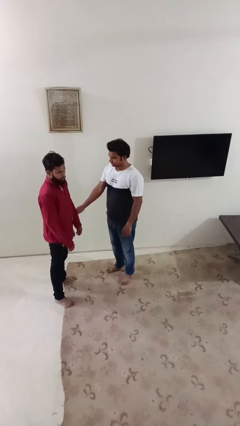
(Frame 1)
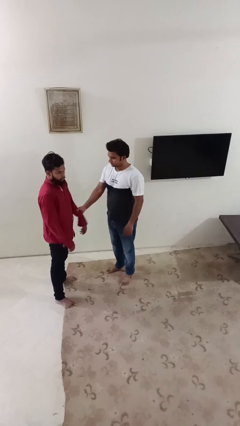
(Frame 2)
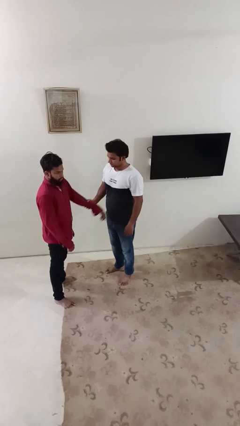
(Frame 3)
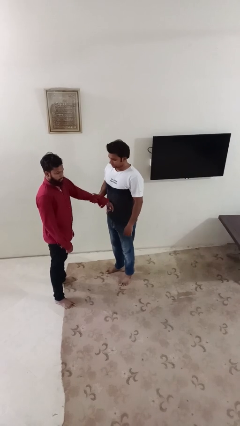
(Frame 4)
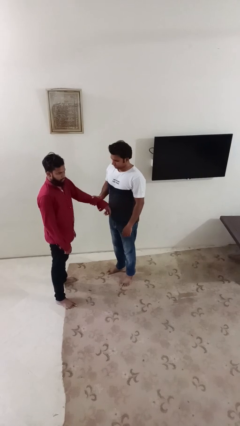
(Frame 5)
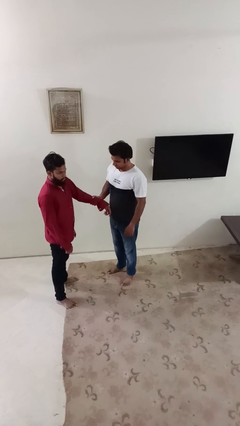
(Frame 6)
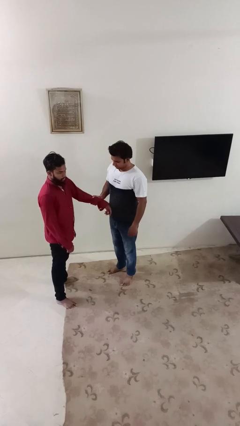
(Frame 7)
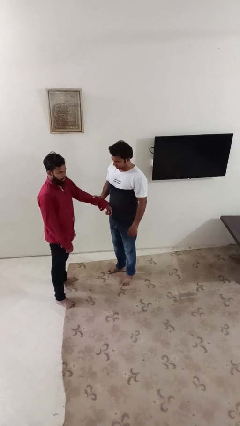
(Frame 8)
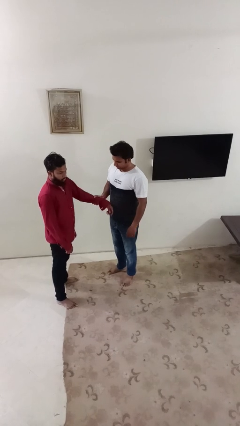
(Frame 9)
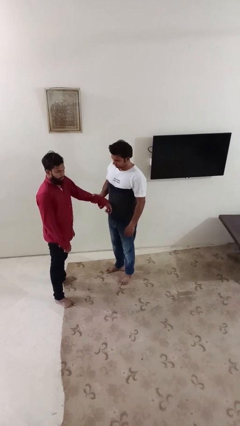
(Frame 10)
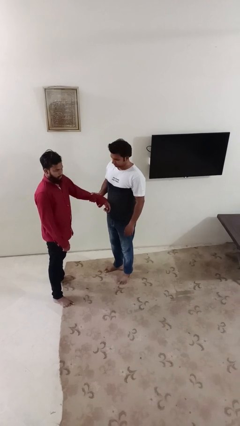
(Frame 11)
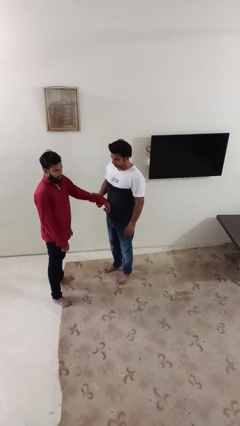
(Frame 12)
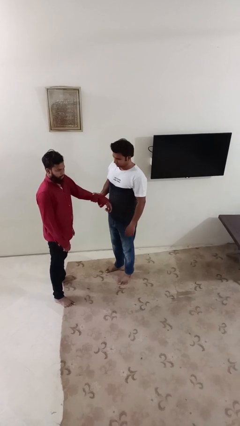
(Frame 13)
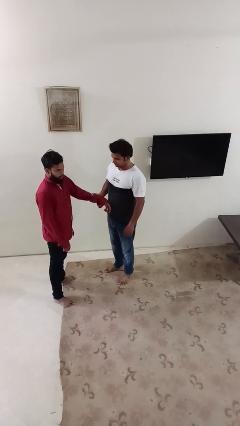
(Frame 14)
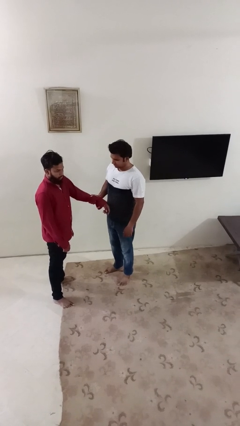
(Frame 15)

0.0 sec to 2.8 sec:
person grabs person by forearm

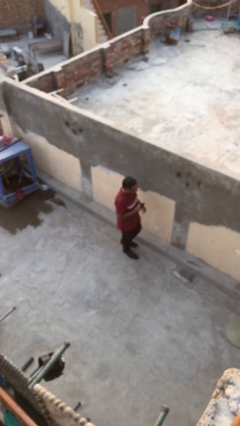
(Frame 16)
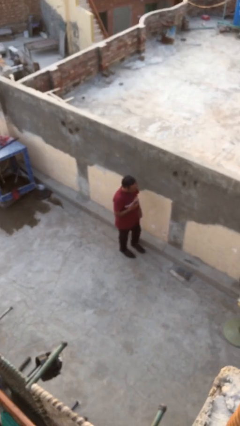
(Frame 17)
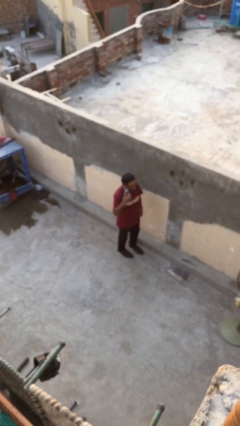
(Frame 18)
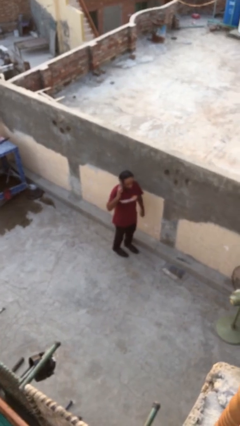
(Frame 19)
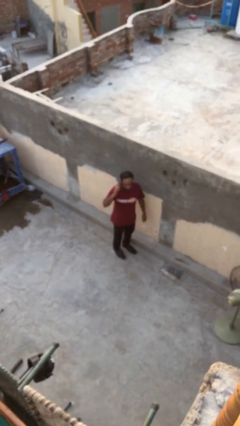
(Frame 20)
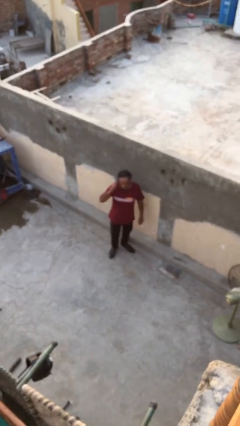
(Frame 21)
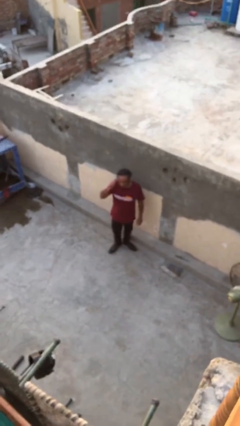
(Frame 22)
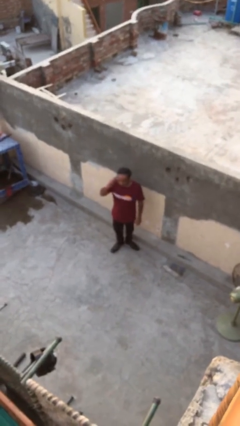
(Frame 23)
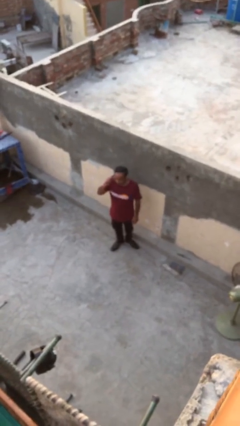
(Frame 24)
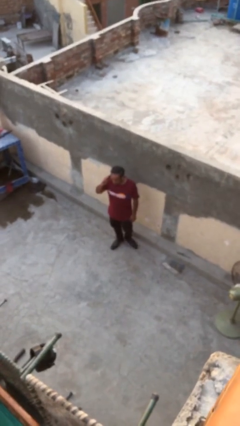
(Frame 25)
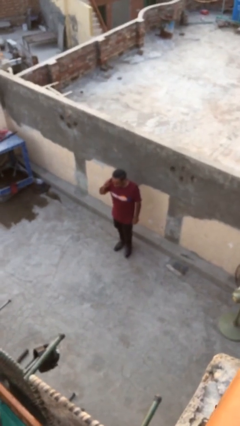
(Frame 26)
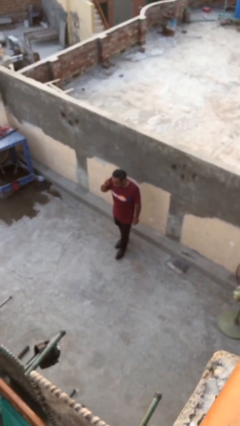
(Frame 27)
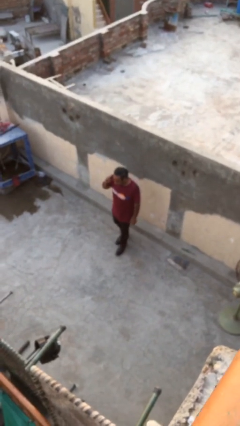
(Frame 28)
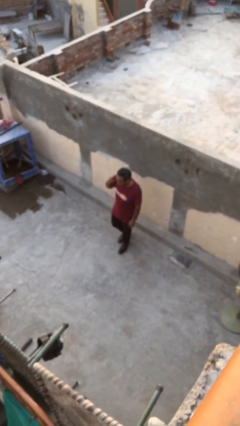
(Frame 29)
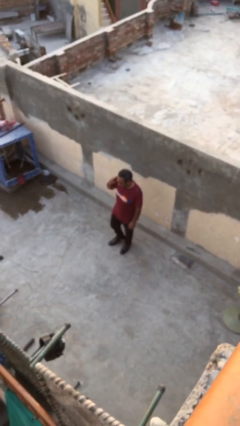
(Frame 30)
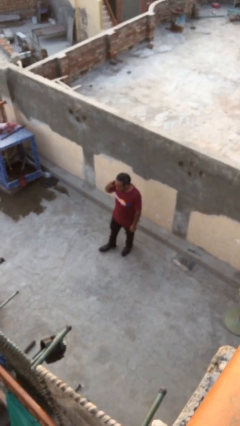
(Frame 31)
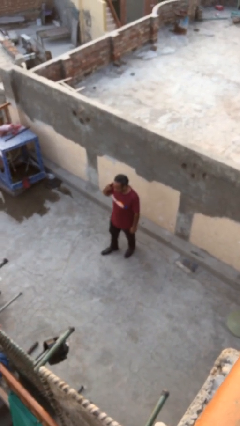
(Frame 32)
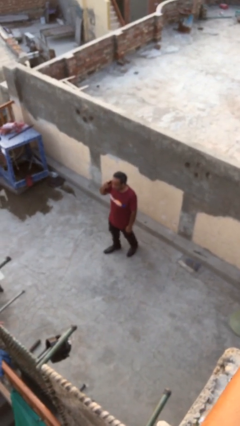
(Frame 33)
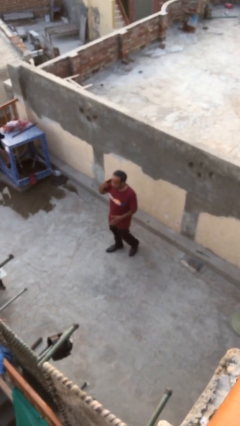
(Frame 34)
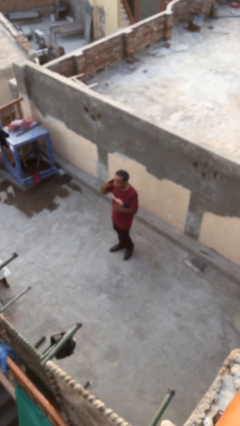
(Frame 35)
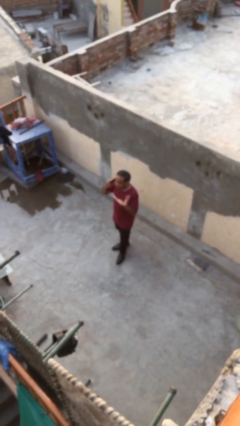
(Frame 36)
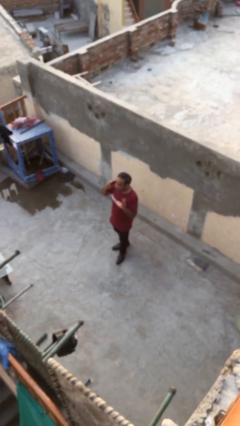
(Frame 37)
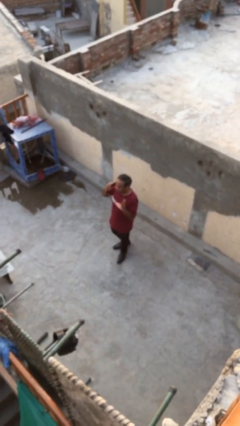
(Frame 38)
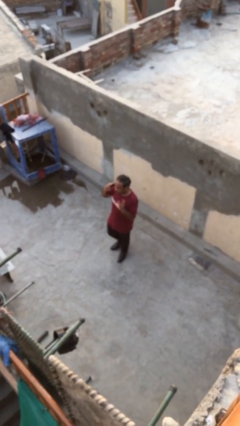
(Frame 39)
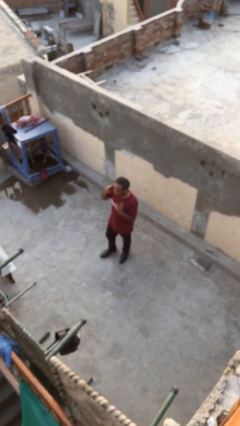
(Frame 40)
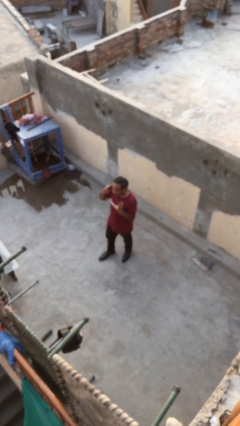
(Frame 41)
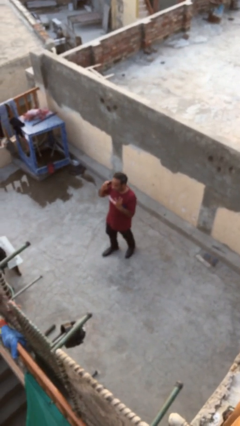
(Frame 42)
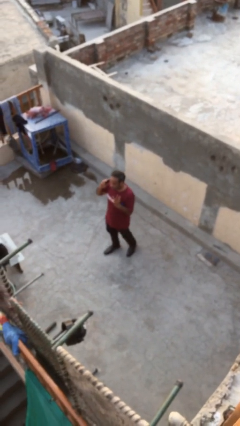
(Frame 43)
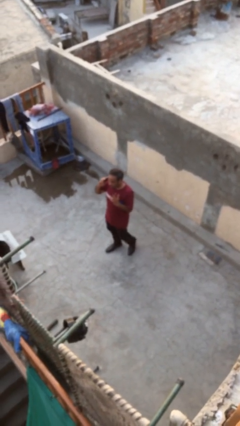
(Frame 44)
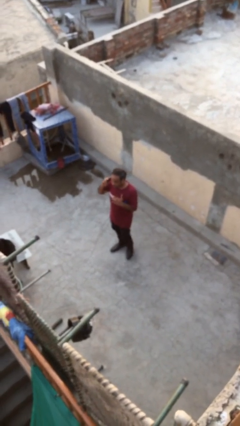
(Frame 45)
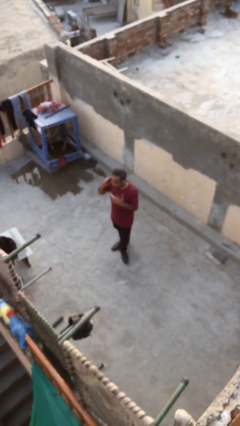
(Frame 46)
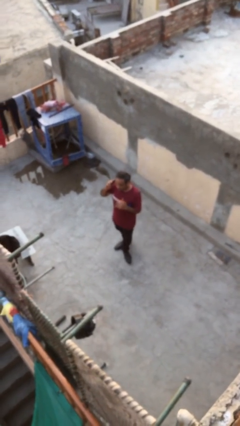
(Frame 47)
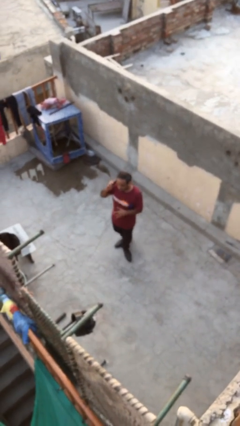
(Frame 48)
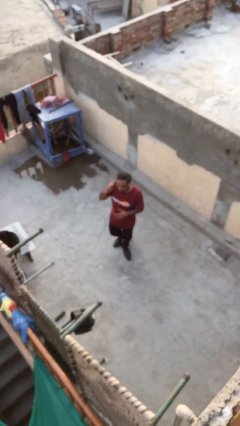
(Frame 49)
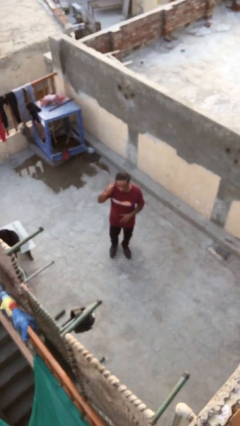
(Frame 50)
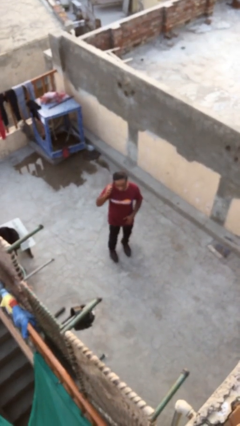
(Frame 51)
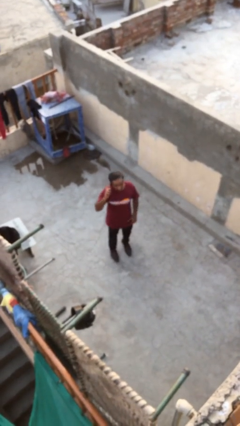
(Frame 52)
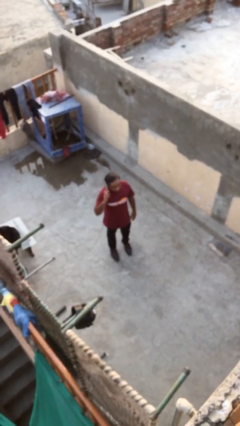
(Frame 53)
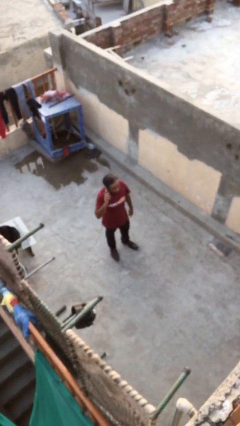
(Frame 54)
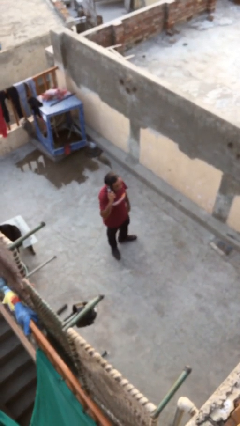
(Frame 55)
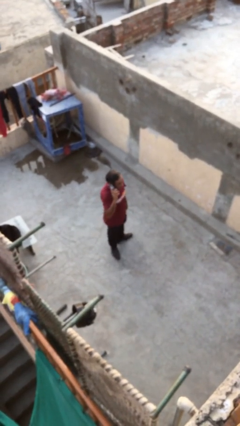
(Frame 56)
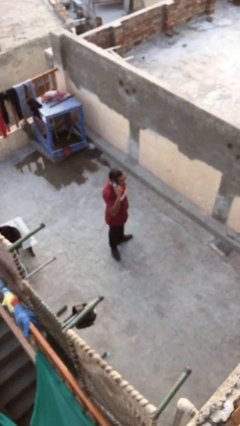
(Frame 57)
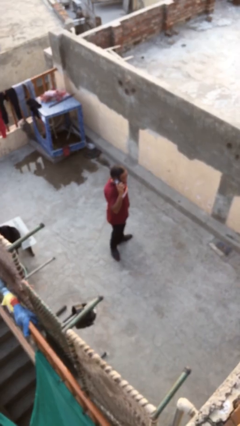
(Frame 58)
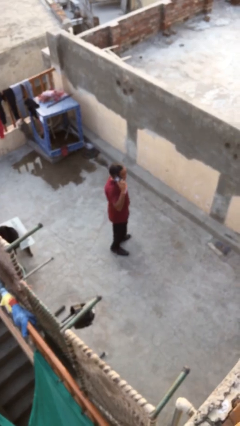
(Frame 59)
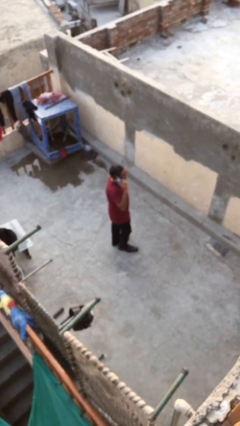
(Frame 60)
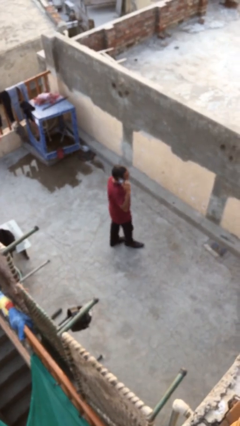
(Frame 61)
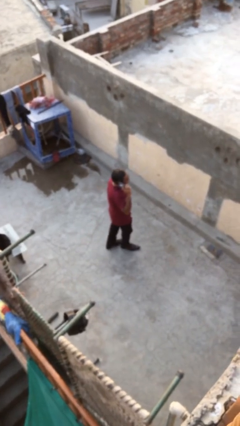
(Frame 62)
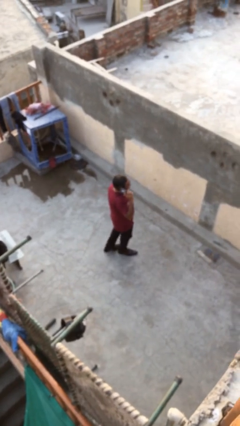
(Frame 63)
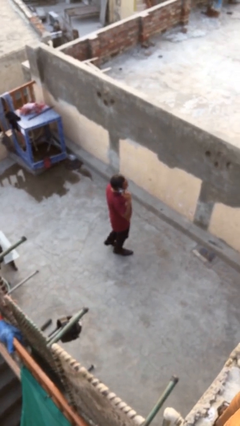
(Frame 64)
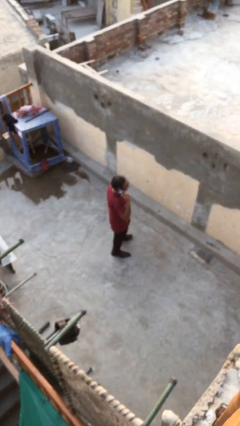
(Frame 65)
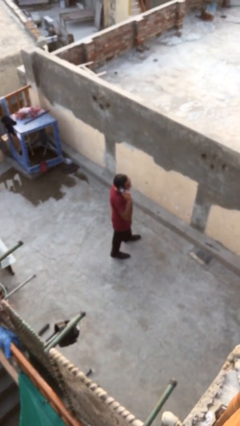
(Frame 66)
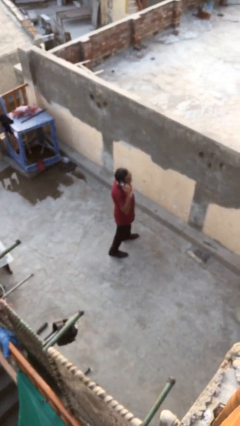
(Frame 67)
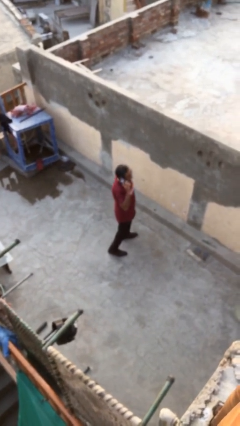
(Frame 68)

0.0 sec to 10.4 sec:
person talks on phone

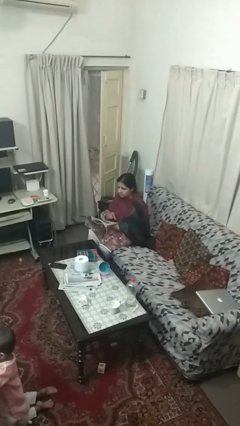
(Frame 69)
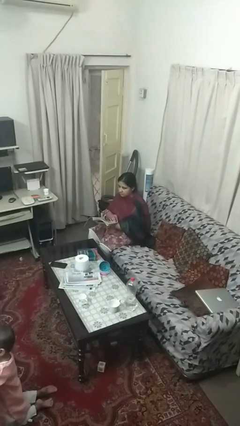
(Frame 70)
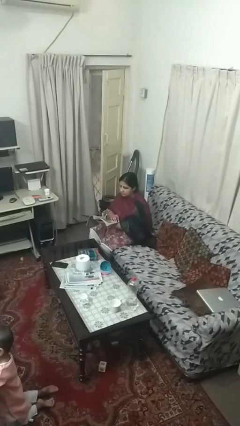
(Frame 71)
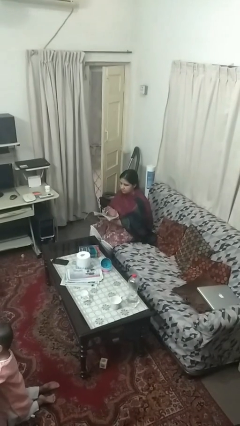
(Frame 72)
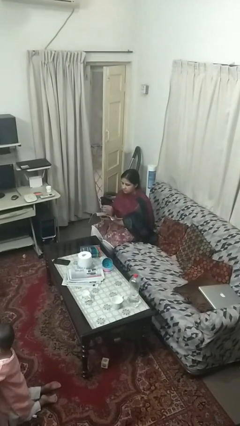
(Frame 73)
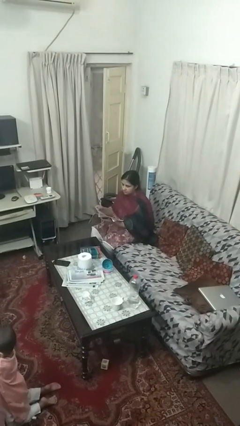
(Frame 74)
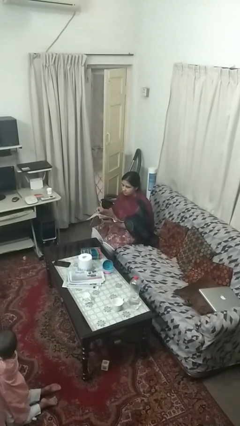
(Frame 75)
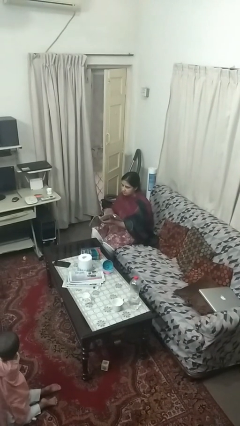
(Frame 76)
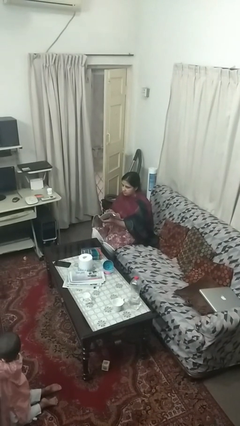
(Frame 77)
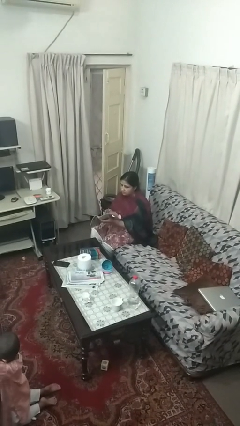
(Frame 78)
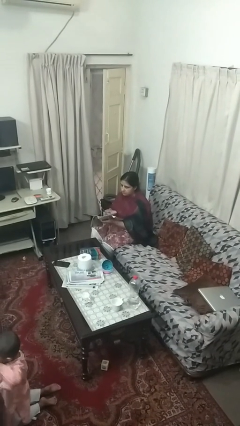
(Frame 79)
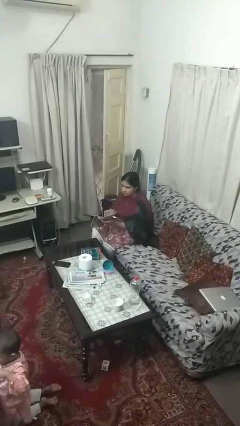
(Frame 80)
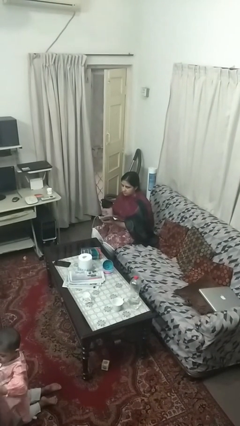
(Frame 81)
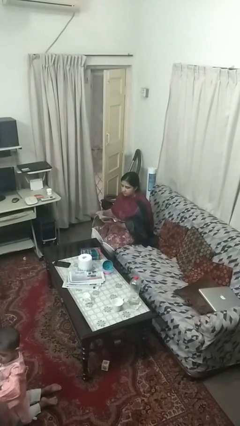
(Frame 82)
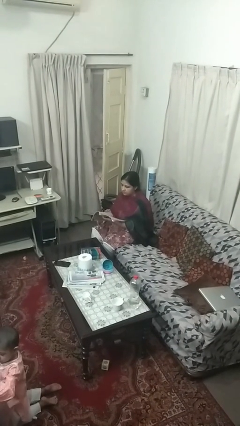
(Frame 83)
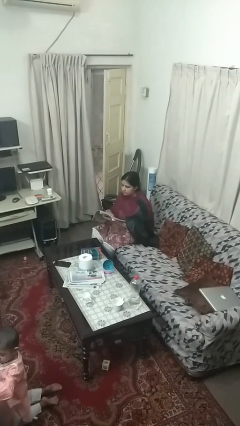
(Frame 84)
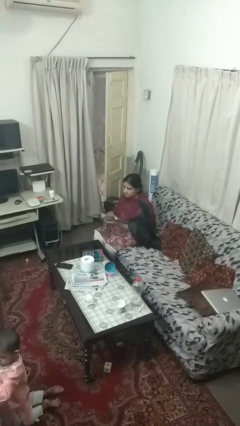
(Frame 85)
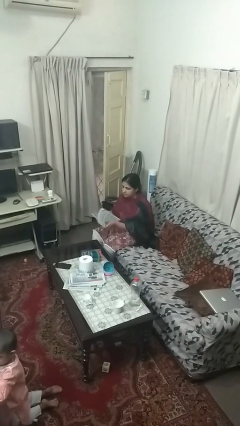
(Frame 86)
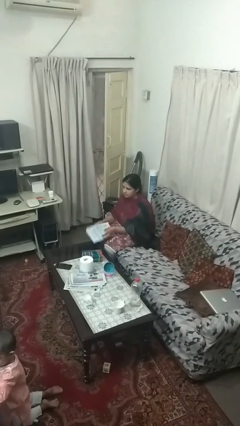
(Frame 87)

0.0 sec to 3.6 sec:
person reads magazine

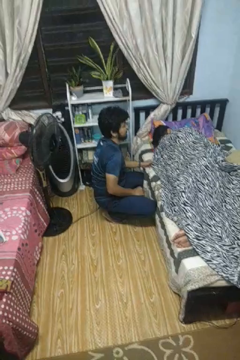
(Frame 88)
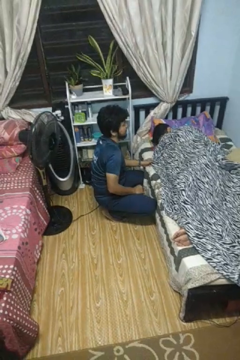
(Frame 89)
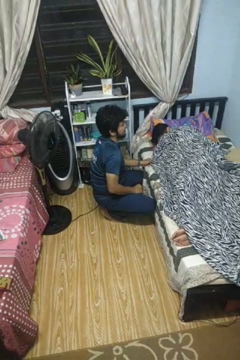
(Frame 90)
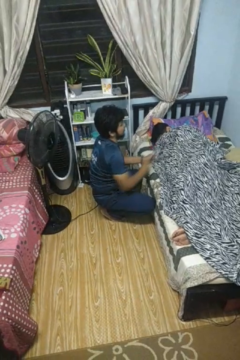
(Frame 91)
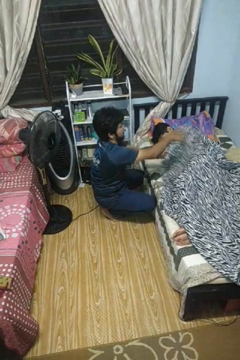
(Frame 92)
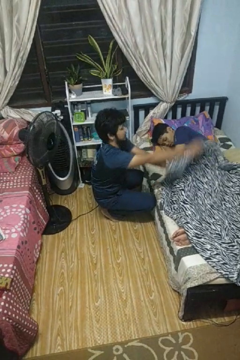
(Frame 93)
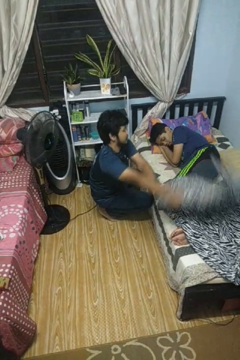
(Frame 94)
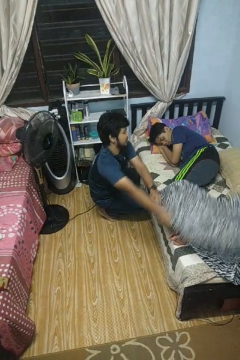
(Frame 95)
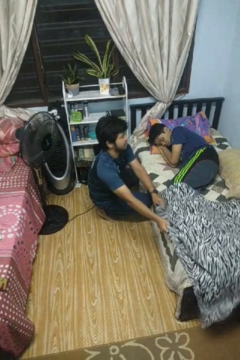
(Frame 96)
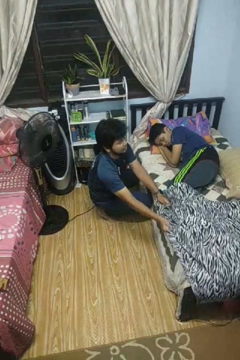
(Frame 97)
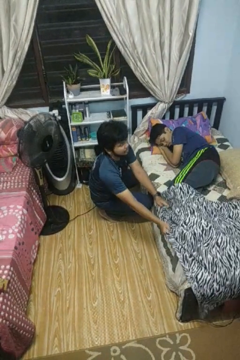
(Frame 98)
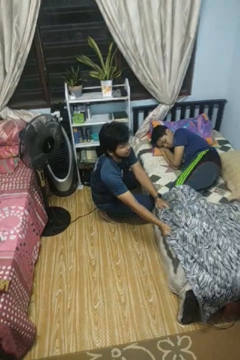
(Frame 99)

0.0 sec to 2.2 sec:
person uncovers friend with blanket
